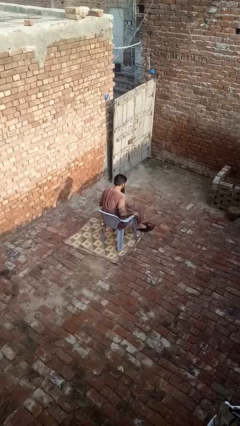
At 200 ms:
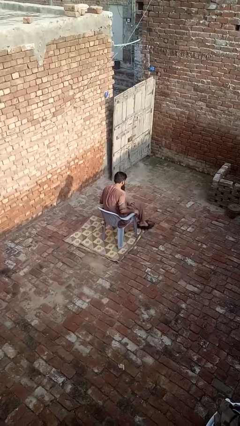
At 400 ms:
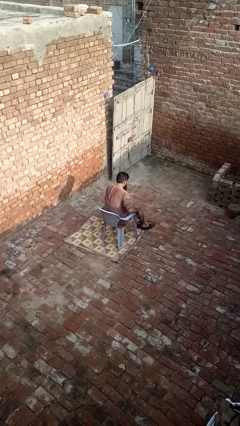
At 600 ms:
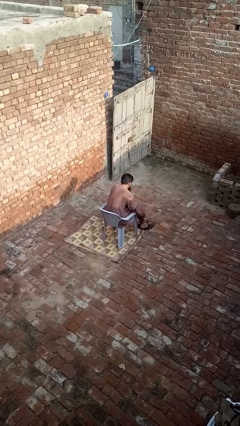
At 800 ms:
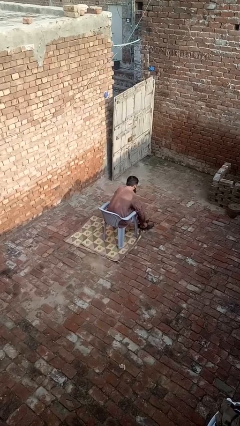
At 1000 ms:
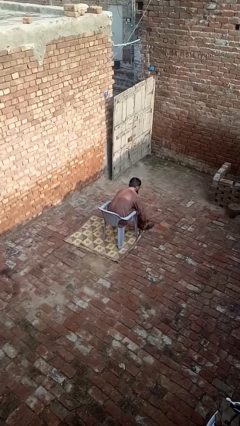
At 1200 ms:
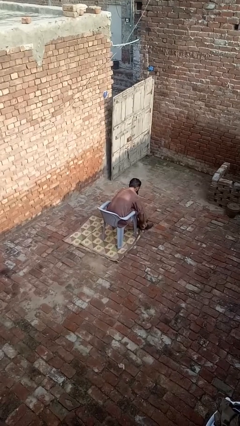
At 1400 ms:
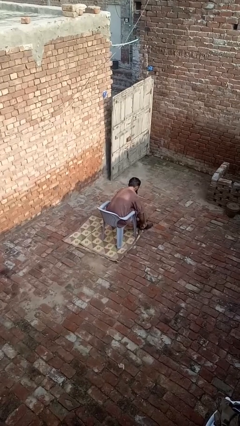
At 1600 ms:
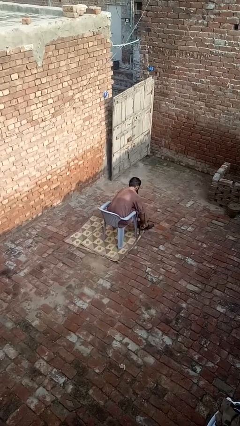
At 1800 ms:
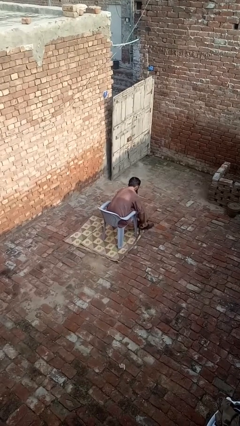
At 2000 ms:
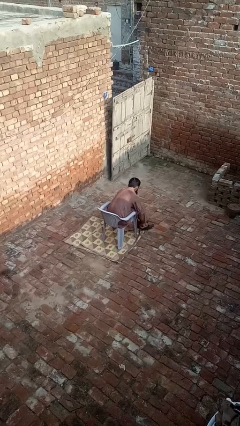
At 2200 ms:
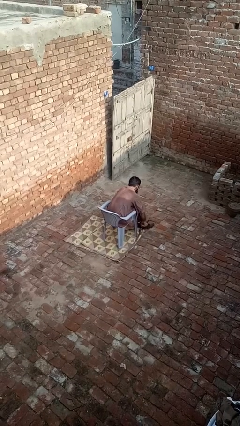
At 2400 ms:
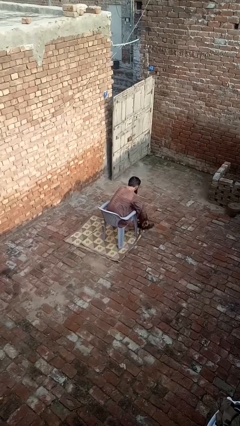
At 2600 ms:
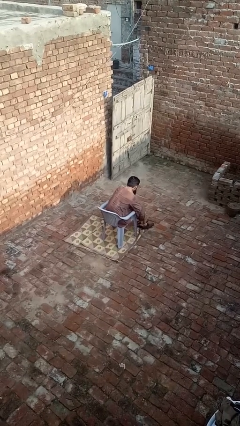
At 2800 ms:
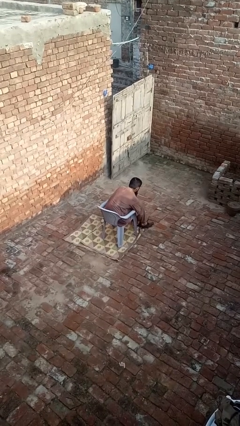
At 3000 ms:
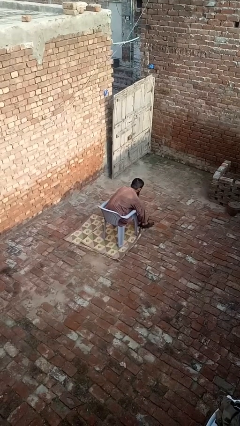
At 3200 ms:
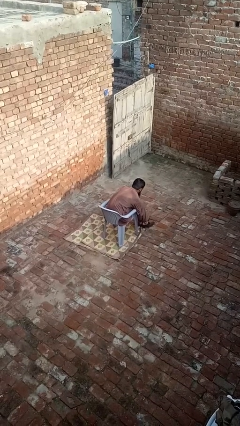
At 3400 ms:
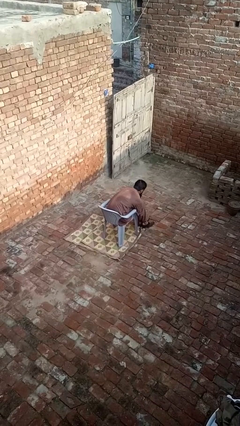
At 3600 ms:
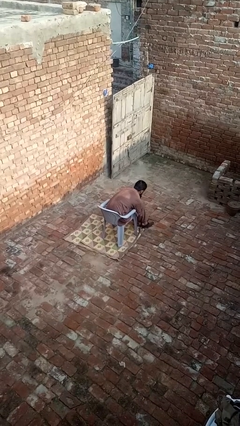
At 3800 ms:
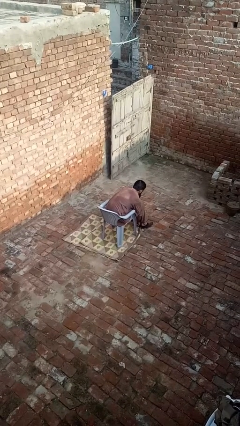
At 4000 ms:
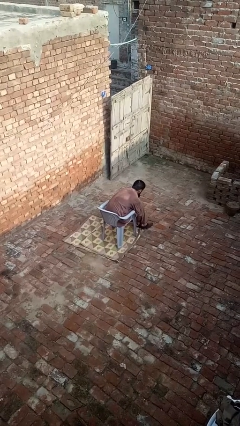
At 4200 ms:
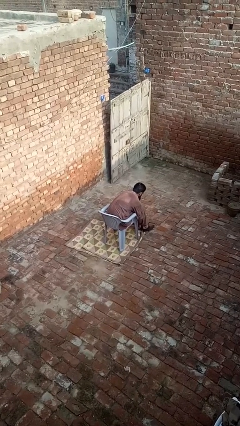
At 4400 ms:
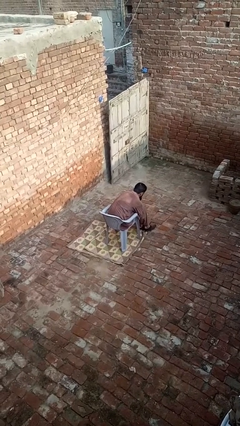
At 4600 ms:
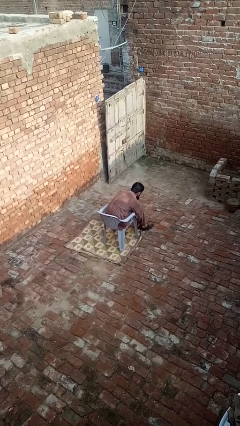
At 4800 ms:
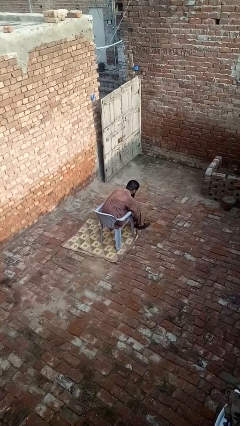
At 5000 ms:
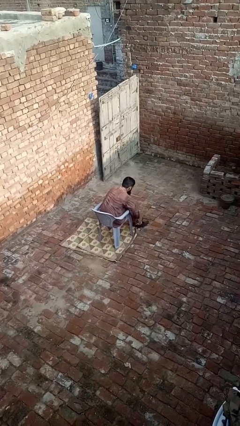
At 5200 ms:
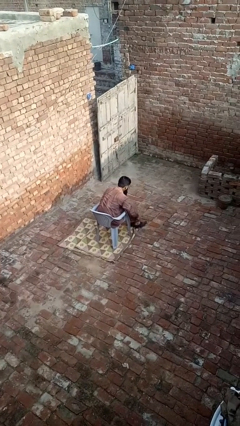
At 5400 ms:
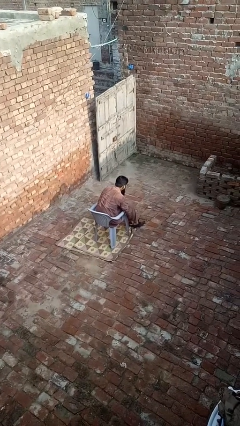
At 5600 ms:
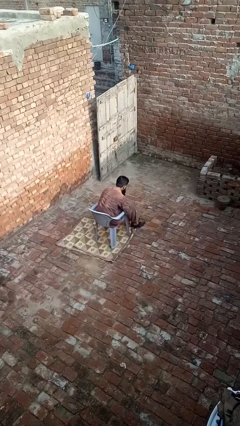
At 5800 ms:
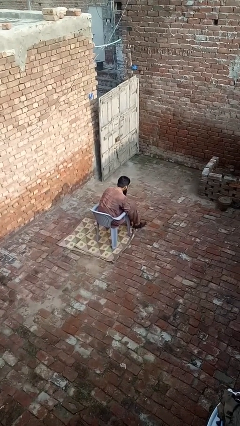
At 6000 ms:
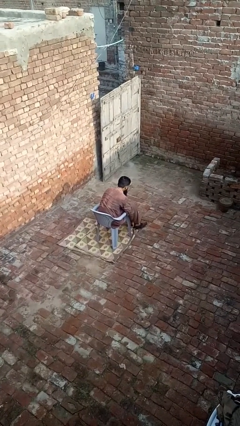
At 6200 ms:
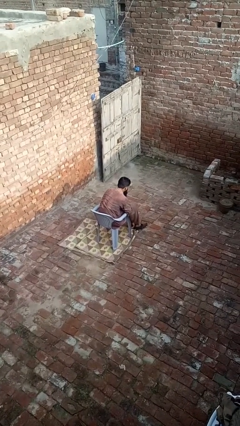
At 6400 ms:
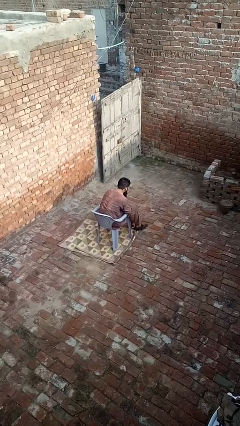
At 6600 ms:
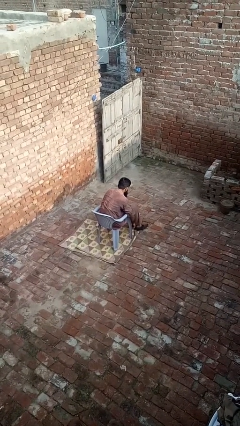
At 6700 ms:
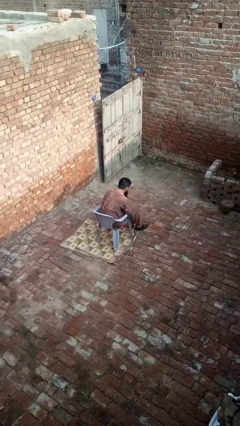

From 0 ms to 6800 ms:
person puts on shoes

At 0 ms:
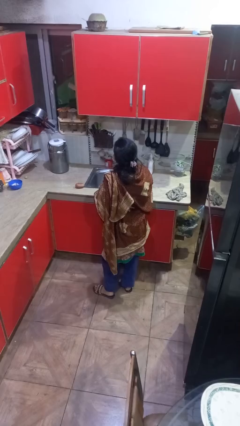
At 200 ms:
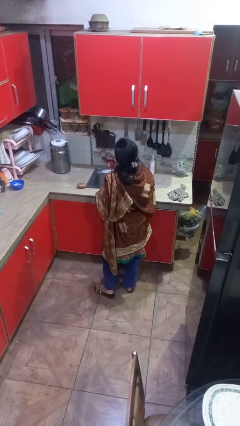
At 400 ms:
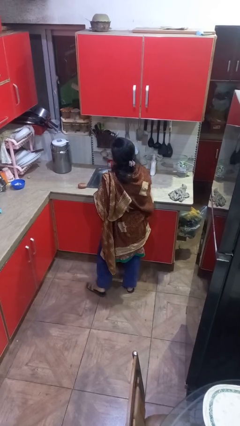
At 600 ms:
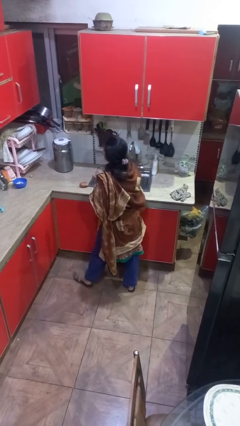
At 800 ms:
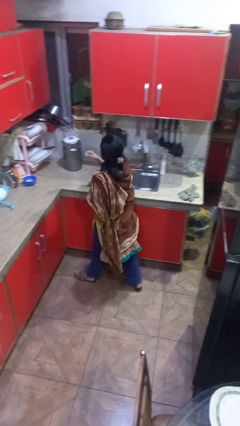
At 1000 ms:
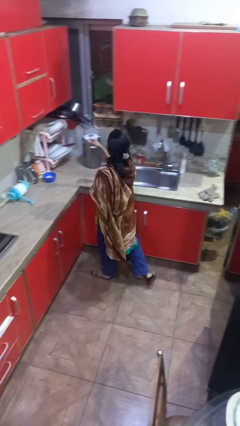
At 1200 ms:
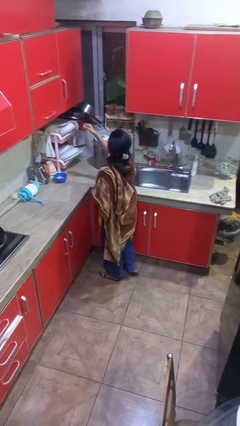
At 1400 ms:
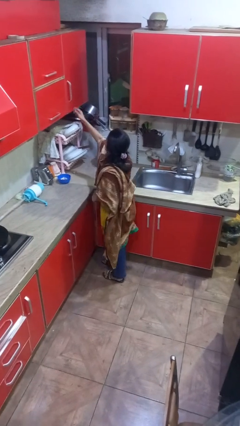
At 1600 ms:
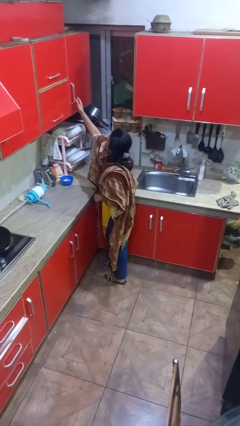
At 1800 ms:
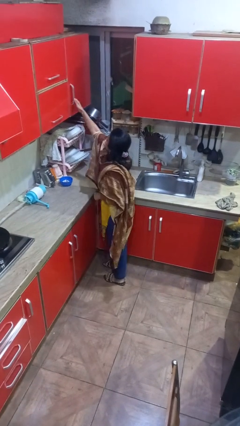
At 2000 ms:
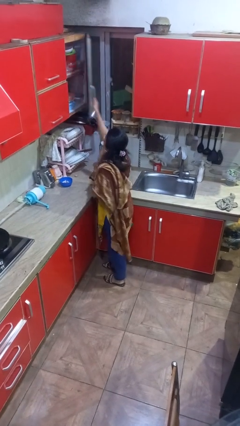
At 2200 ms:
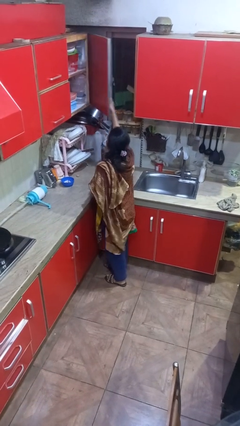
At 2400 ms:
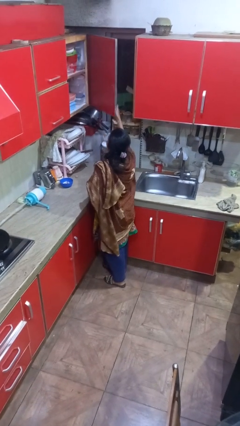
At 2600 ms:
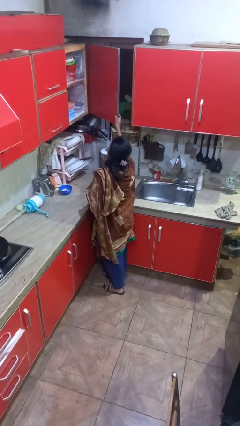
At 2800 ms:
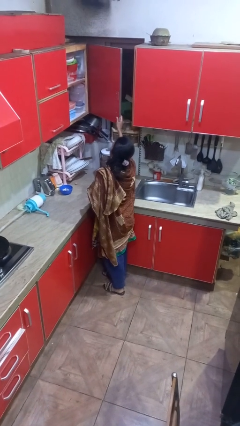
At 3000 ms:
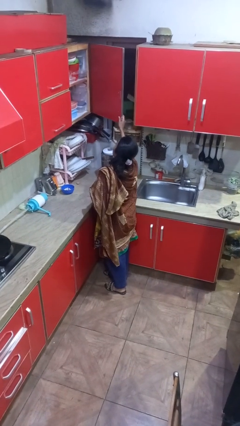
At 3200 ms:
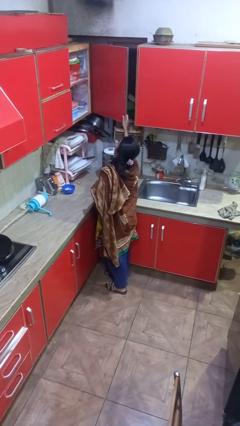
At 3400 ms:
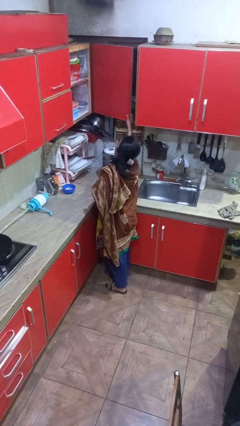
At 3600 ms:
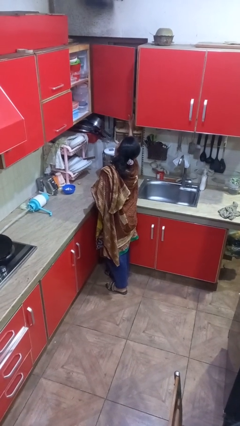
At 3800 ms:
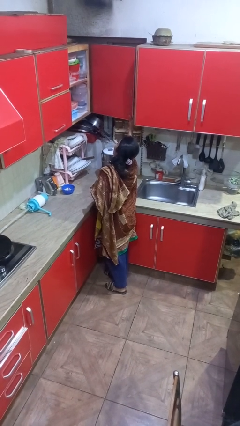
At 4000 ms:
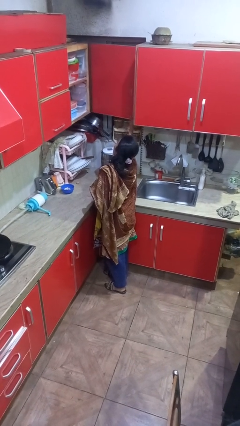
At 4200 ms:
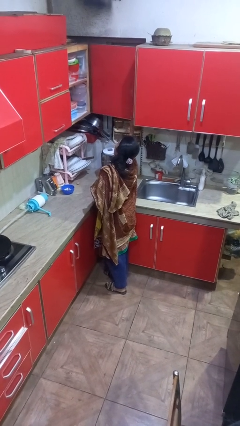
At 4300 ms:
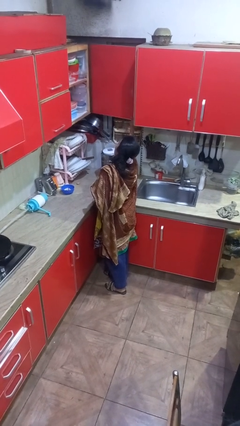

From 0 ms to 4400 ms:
person opens cabinet

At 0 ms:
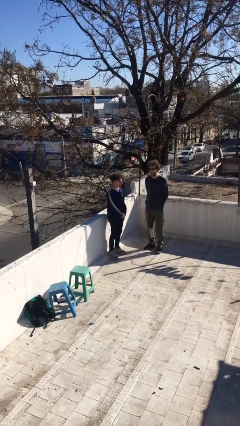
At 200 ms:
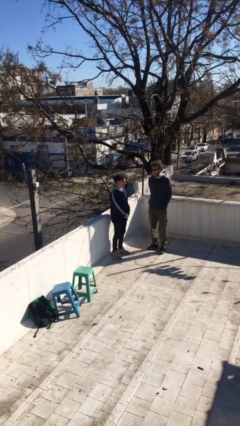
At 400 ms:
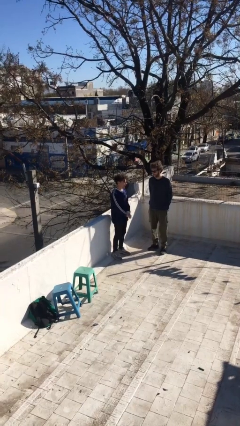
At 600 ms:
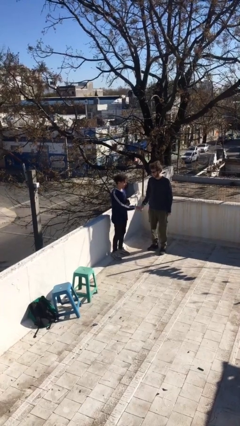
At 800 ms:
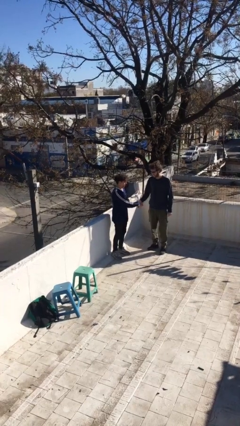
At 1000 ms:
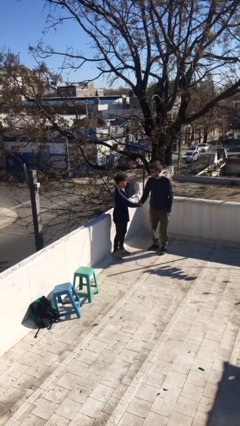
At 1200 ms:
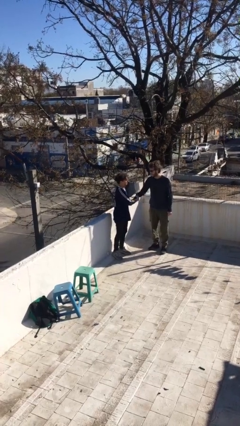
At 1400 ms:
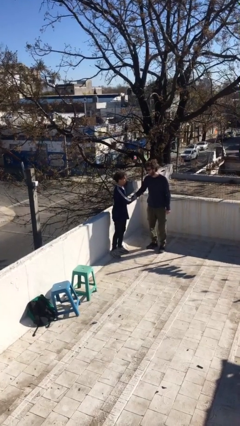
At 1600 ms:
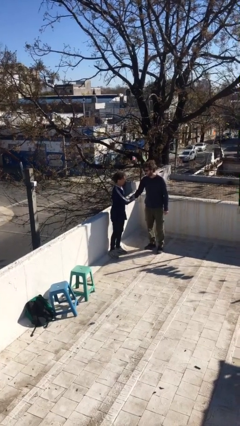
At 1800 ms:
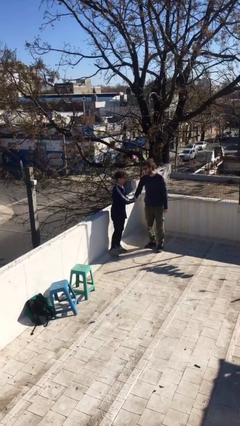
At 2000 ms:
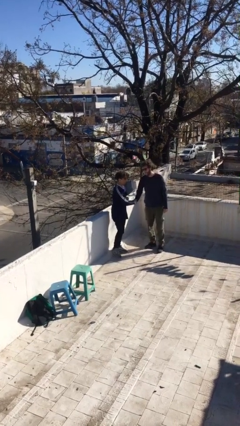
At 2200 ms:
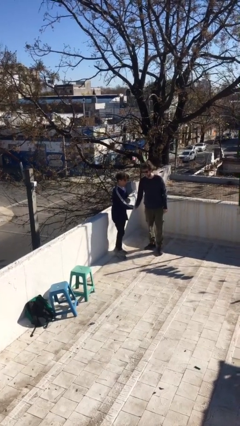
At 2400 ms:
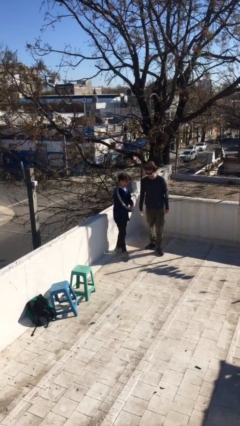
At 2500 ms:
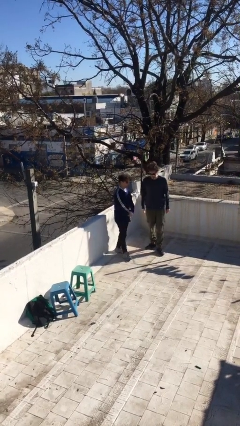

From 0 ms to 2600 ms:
person shakes hand

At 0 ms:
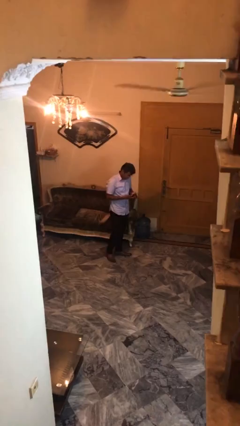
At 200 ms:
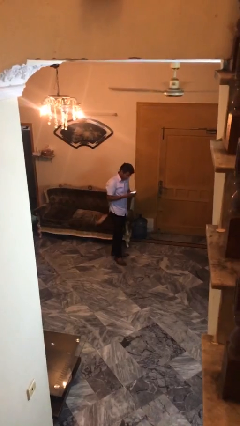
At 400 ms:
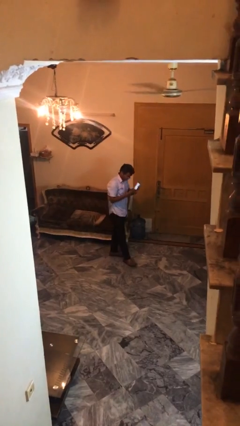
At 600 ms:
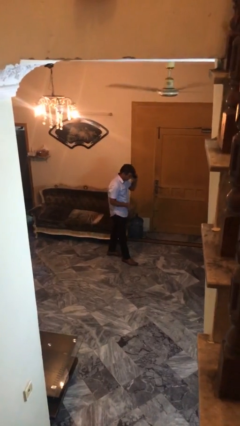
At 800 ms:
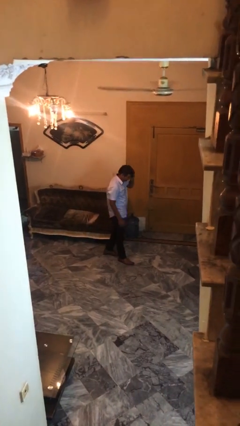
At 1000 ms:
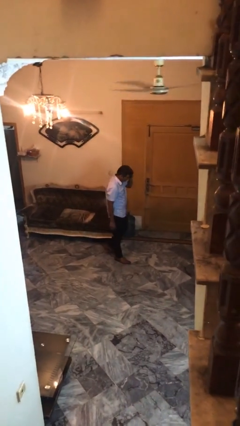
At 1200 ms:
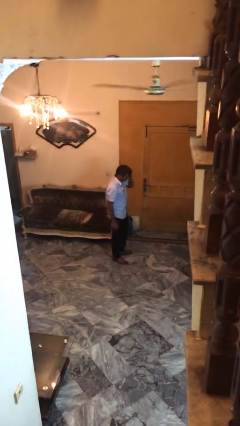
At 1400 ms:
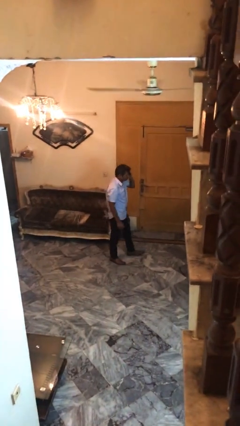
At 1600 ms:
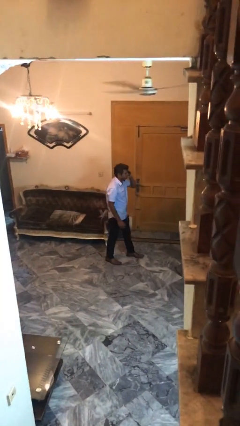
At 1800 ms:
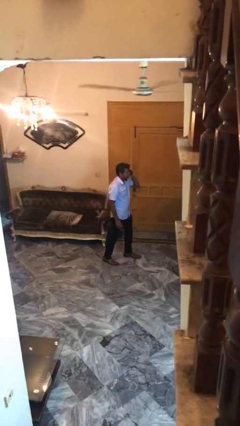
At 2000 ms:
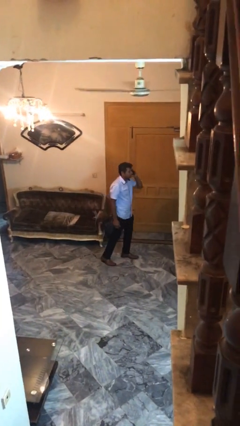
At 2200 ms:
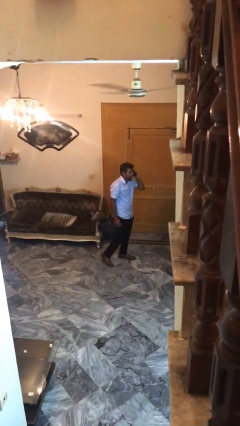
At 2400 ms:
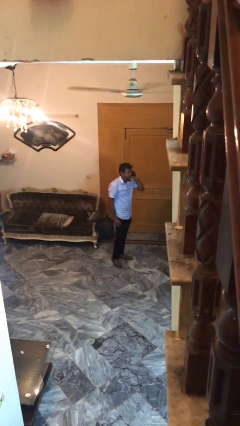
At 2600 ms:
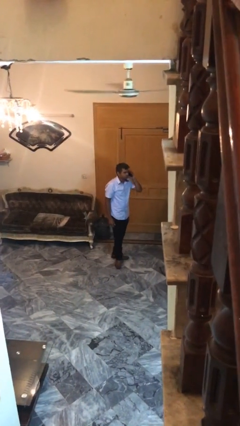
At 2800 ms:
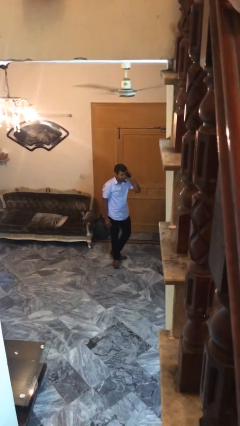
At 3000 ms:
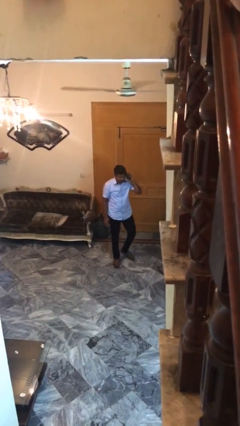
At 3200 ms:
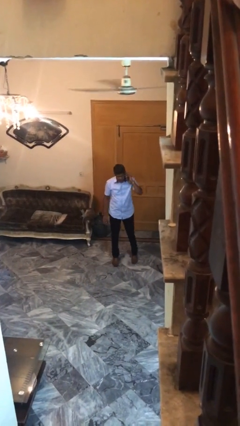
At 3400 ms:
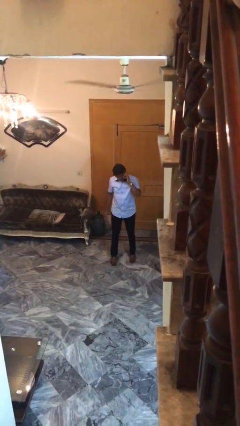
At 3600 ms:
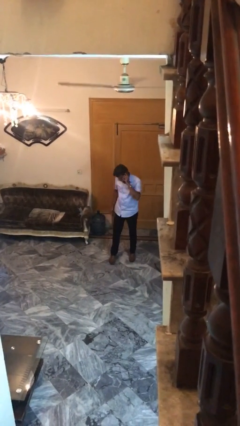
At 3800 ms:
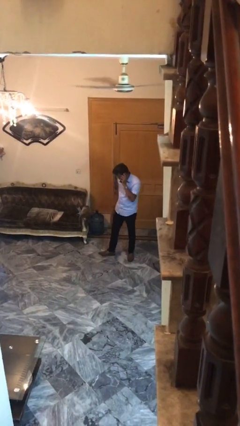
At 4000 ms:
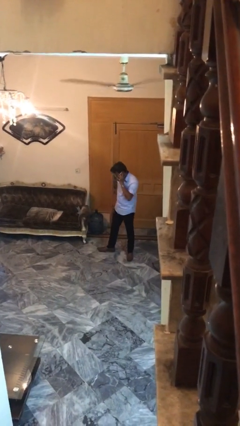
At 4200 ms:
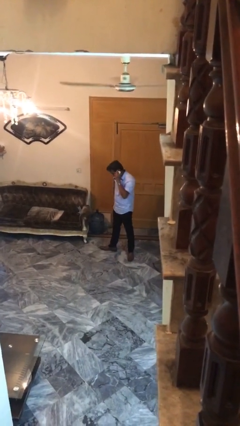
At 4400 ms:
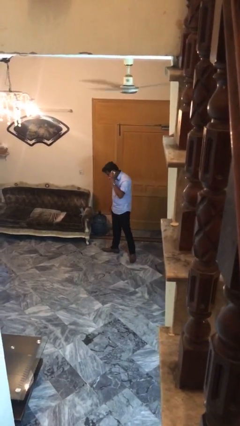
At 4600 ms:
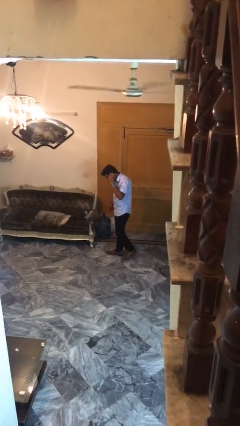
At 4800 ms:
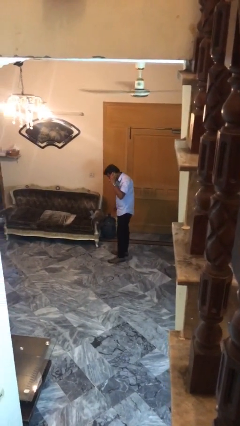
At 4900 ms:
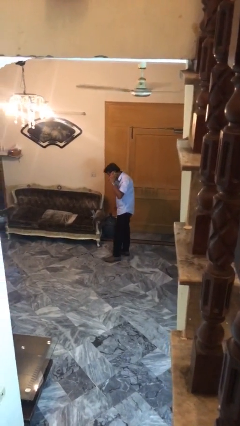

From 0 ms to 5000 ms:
person talks on phone
